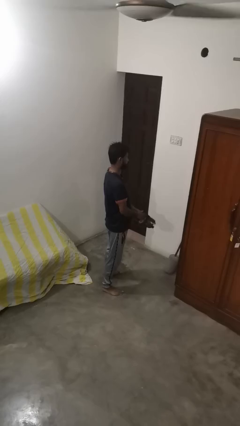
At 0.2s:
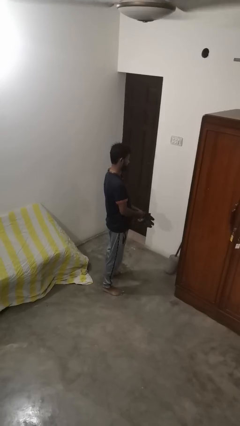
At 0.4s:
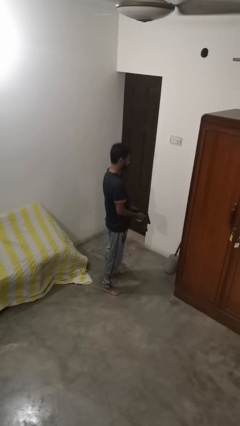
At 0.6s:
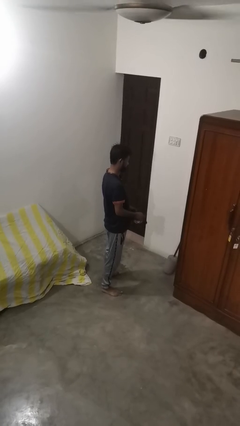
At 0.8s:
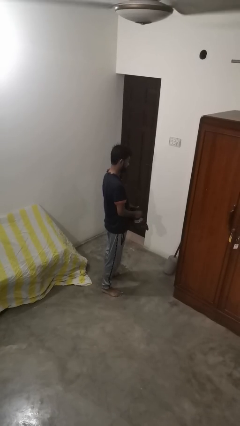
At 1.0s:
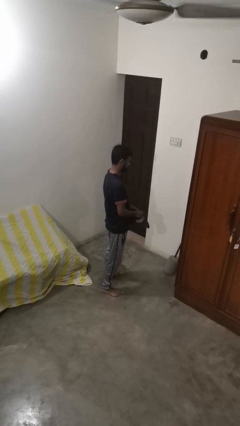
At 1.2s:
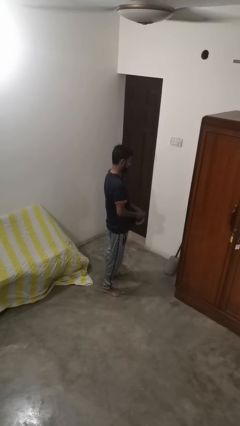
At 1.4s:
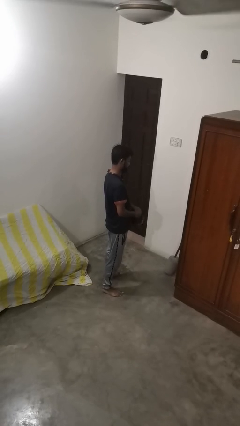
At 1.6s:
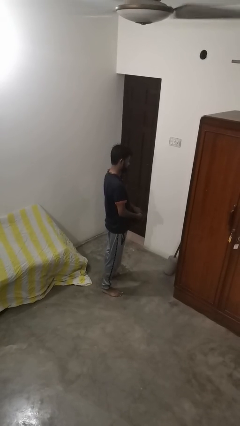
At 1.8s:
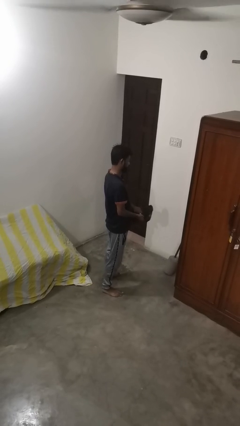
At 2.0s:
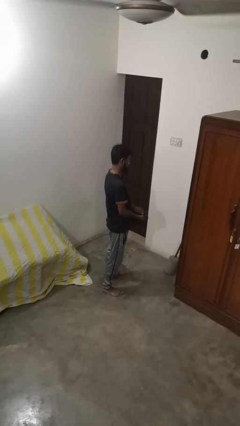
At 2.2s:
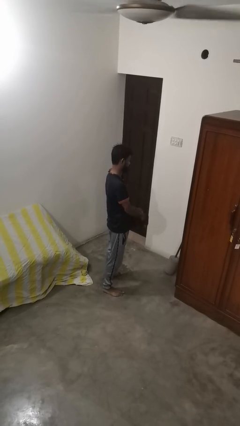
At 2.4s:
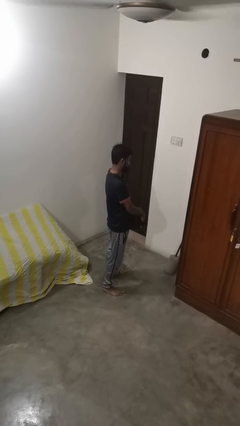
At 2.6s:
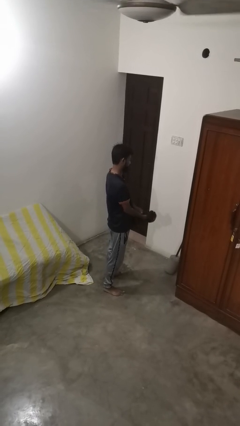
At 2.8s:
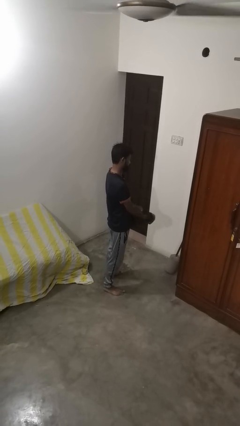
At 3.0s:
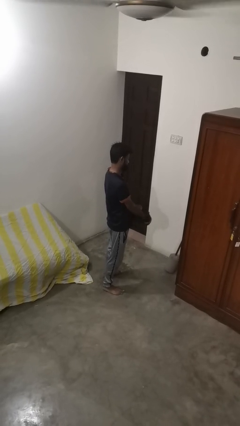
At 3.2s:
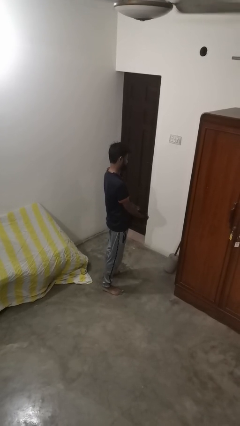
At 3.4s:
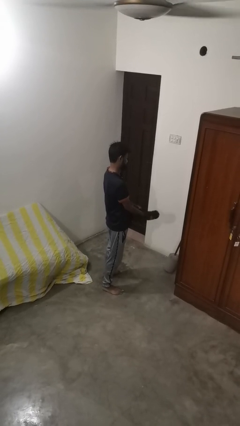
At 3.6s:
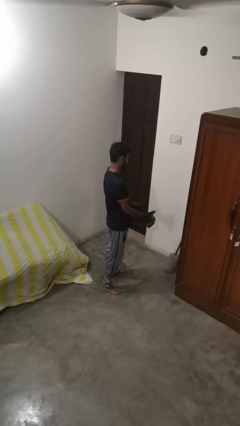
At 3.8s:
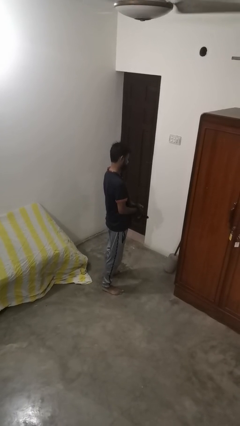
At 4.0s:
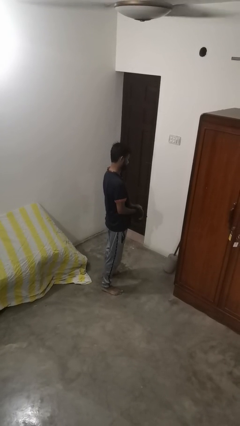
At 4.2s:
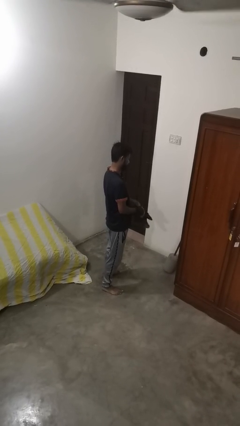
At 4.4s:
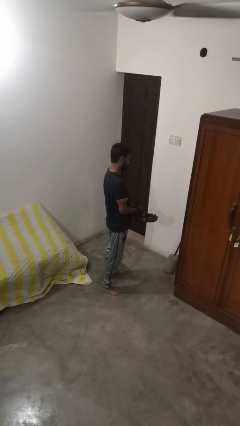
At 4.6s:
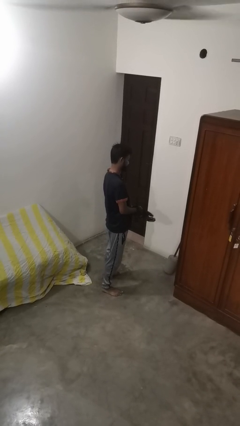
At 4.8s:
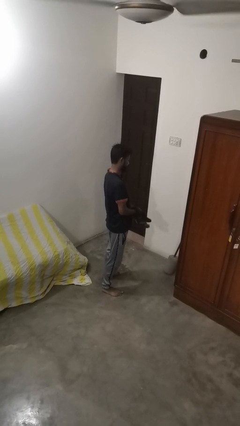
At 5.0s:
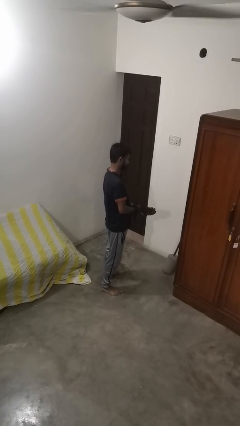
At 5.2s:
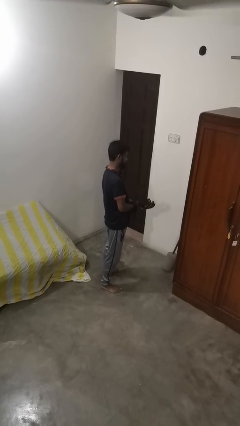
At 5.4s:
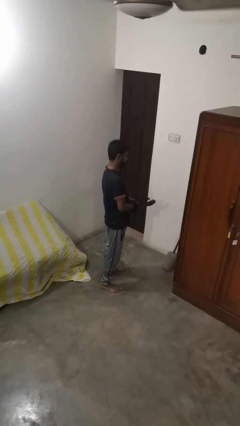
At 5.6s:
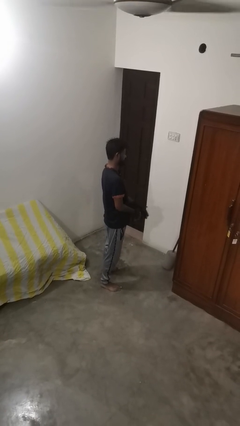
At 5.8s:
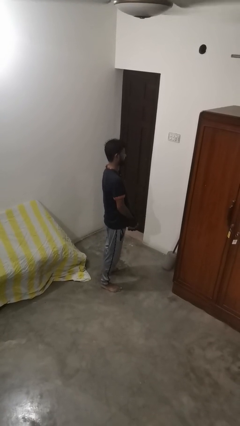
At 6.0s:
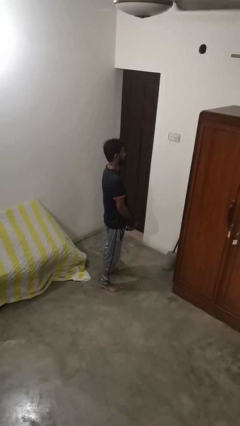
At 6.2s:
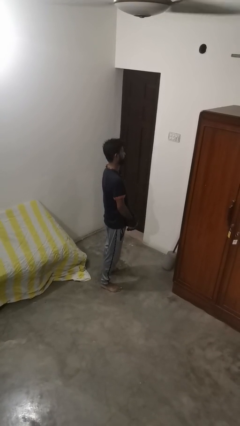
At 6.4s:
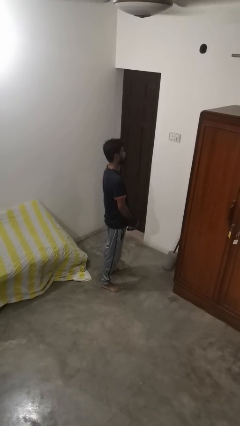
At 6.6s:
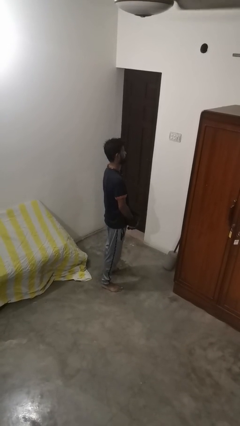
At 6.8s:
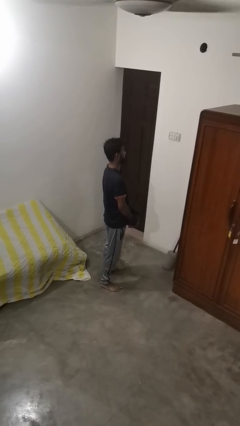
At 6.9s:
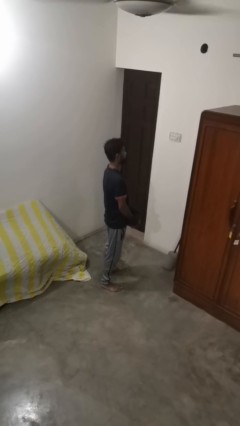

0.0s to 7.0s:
person puts on gloves

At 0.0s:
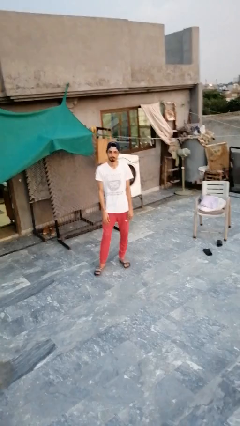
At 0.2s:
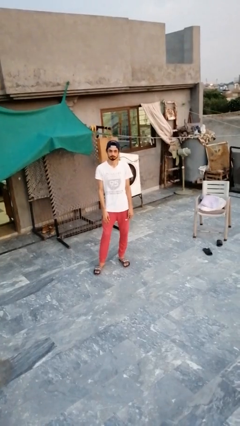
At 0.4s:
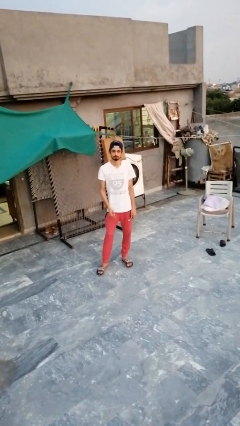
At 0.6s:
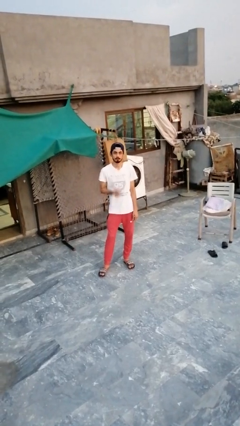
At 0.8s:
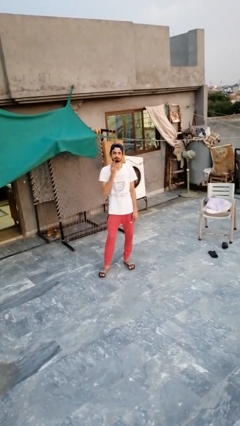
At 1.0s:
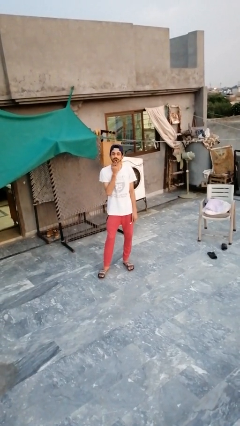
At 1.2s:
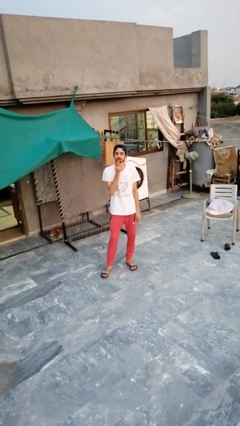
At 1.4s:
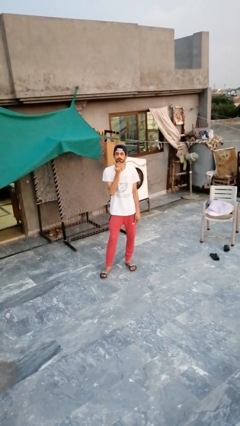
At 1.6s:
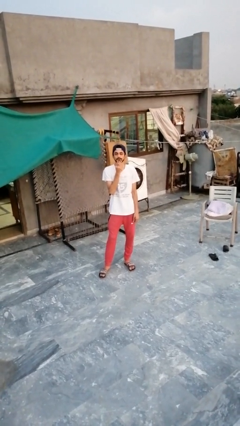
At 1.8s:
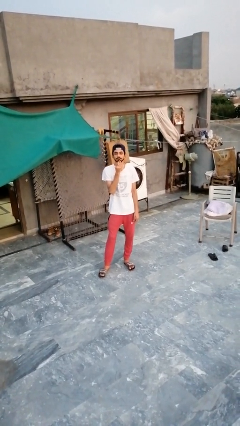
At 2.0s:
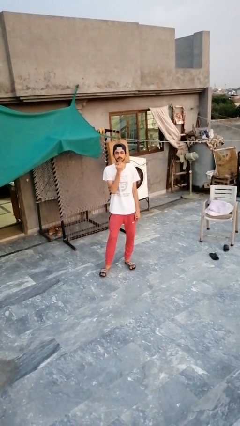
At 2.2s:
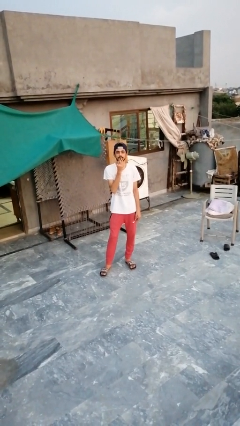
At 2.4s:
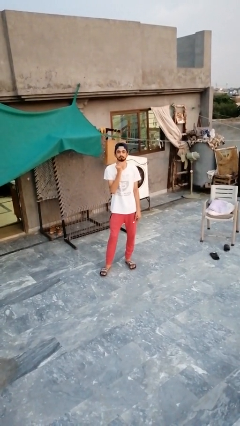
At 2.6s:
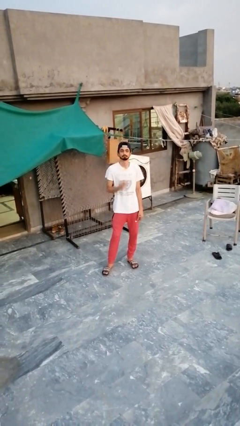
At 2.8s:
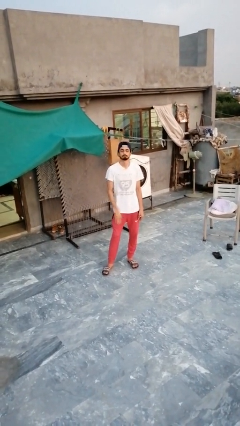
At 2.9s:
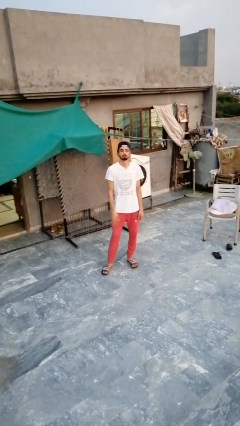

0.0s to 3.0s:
person strokes chin

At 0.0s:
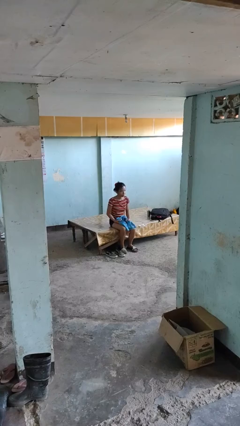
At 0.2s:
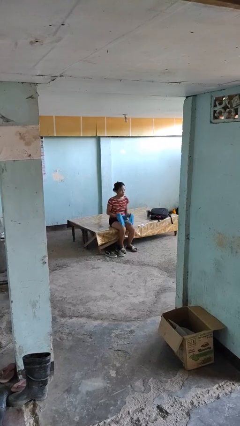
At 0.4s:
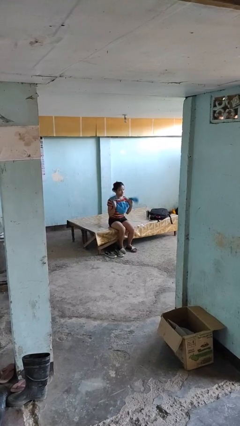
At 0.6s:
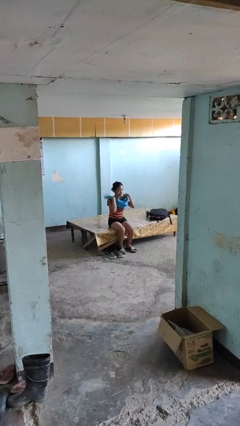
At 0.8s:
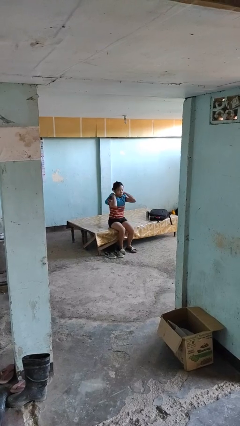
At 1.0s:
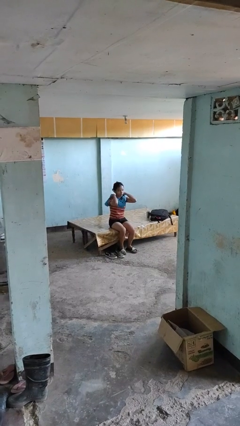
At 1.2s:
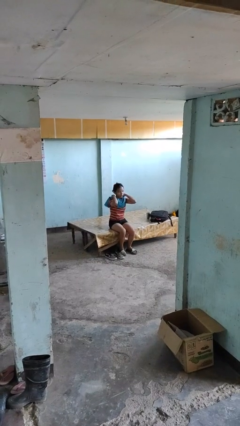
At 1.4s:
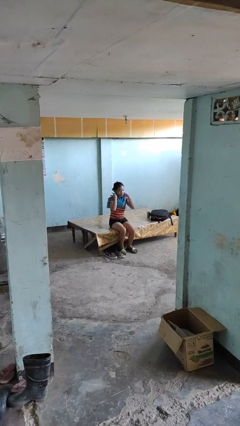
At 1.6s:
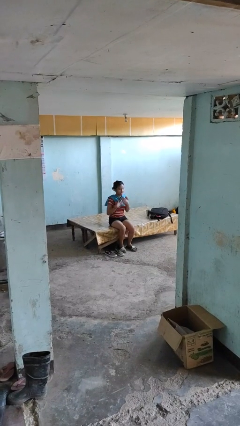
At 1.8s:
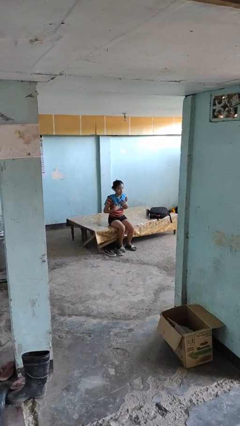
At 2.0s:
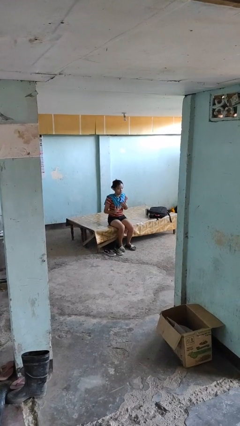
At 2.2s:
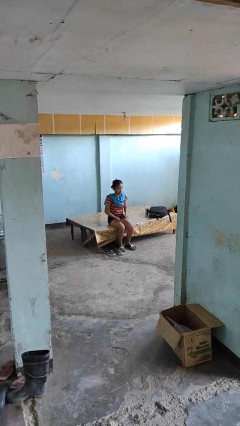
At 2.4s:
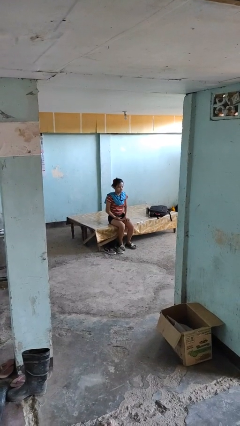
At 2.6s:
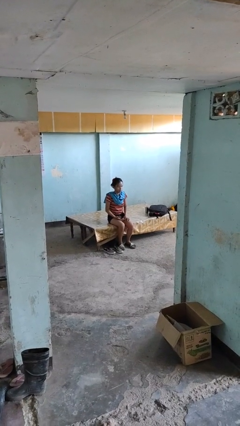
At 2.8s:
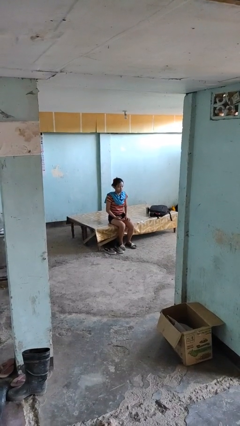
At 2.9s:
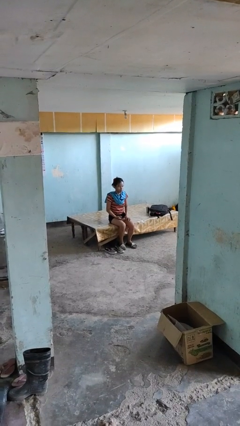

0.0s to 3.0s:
person puts on scarf

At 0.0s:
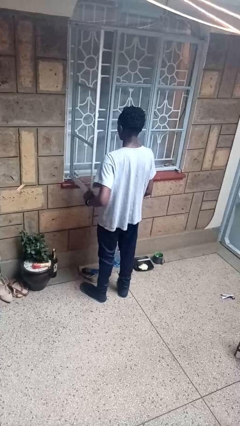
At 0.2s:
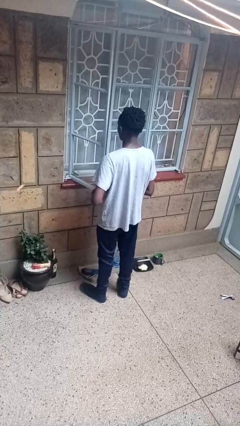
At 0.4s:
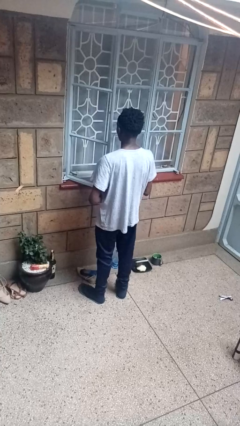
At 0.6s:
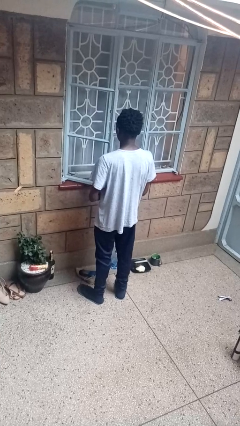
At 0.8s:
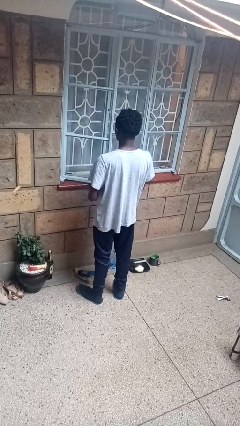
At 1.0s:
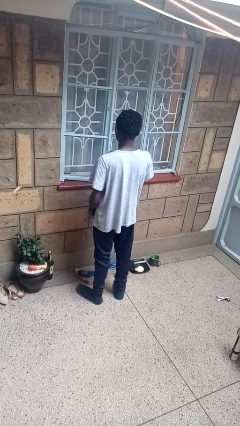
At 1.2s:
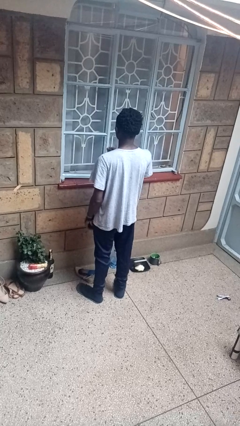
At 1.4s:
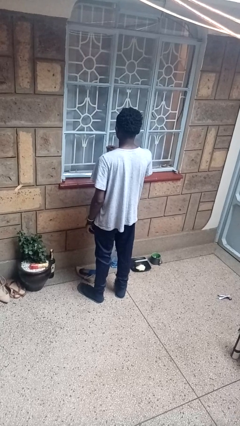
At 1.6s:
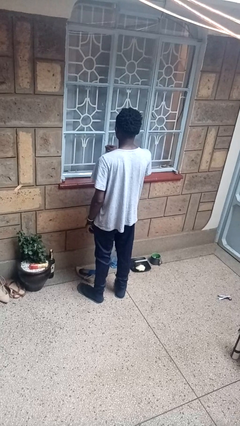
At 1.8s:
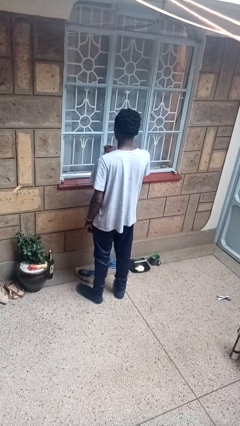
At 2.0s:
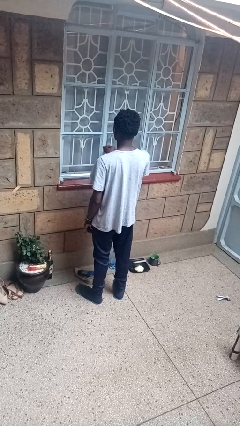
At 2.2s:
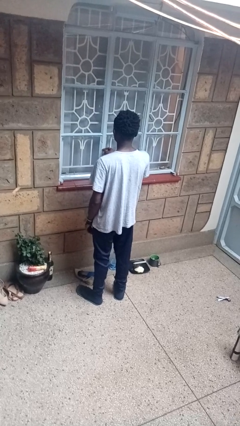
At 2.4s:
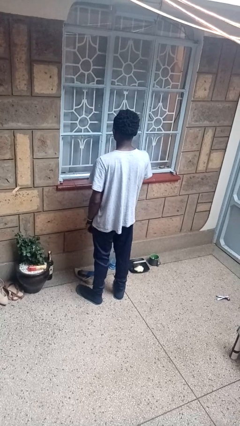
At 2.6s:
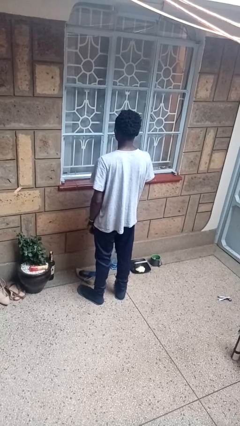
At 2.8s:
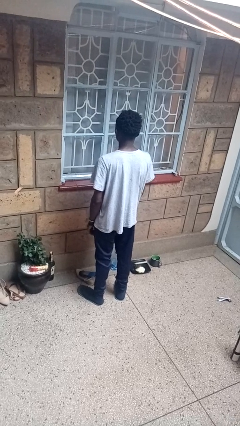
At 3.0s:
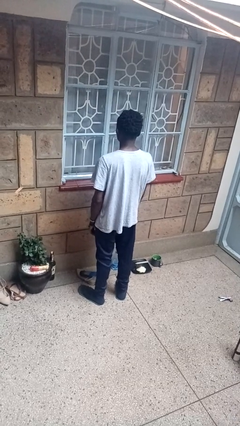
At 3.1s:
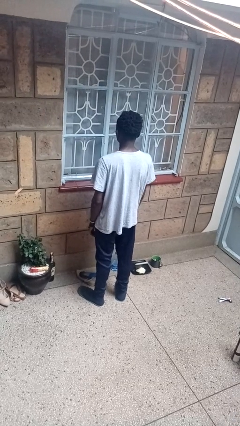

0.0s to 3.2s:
person closes home window

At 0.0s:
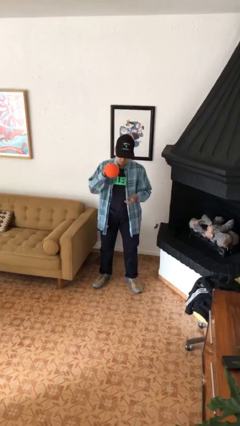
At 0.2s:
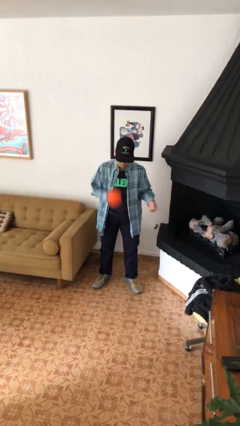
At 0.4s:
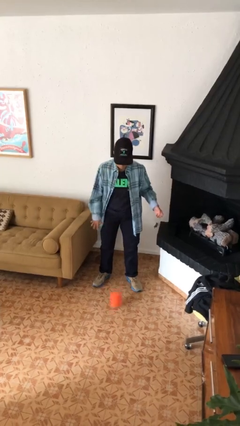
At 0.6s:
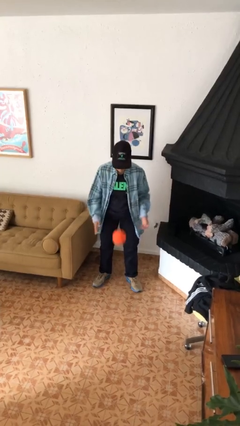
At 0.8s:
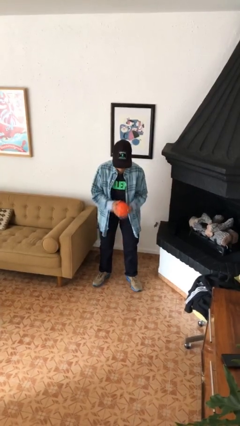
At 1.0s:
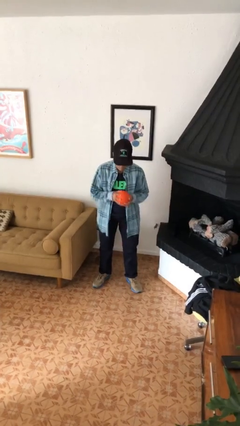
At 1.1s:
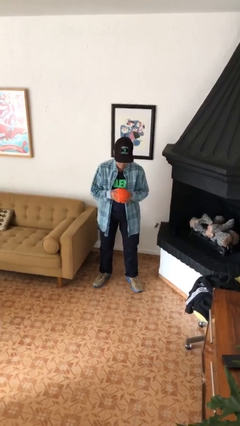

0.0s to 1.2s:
person bounces ball on floor
